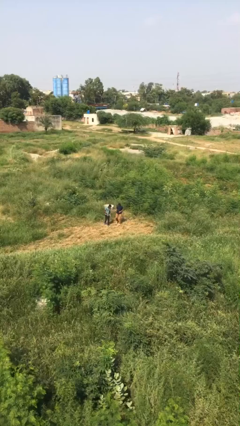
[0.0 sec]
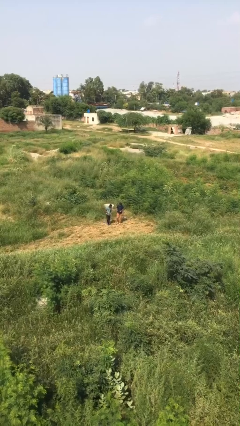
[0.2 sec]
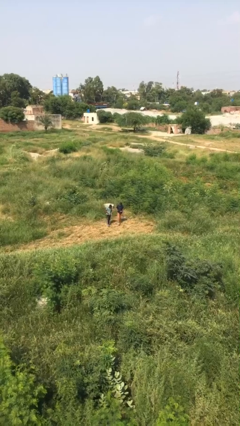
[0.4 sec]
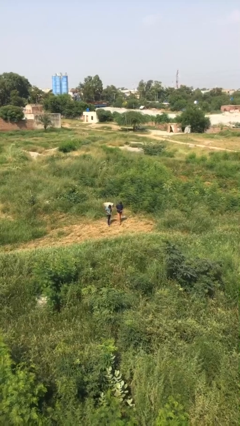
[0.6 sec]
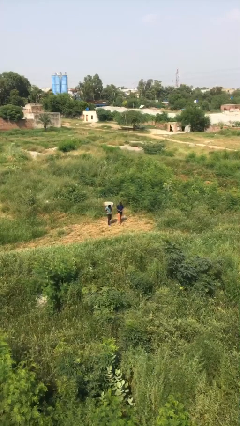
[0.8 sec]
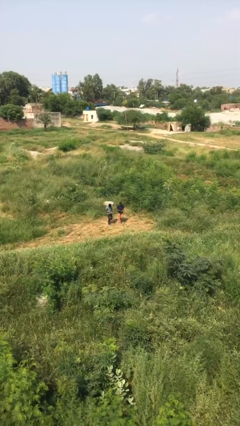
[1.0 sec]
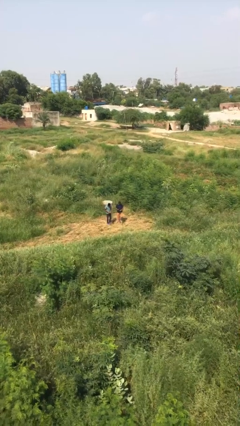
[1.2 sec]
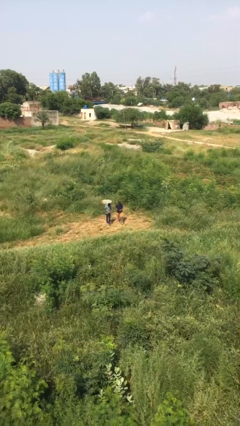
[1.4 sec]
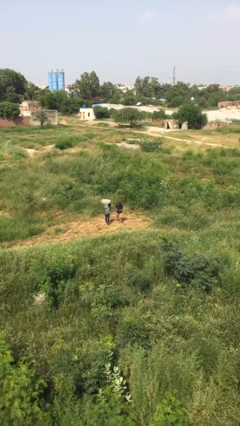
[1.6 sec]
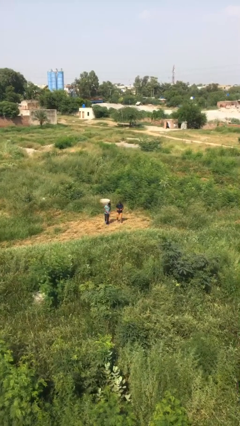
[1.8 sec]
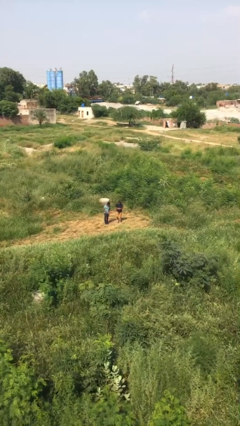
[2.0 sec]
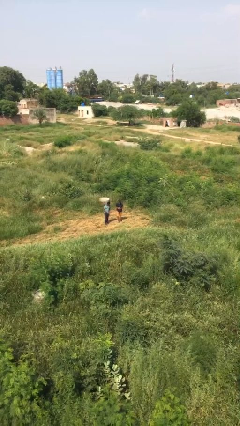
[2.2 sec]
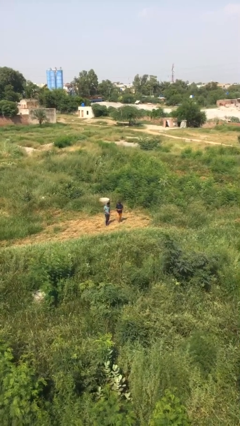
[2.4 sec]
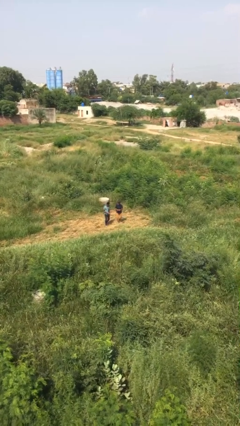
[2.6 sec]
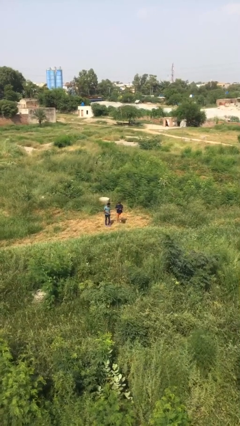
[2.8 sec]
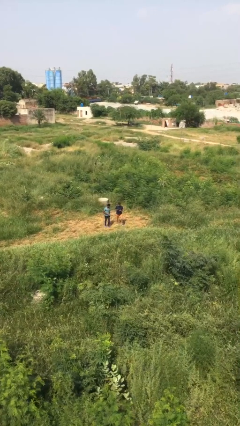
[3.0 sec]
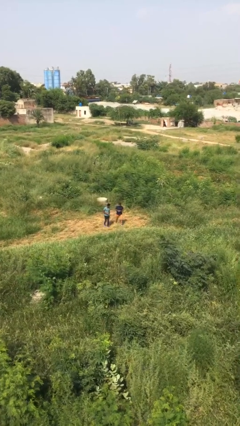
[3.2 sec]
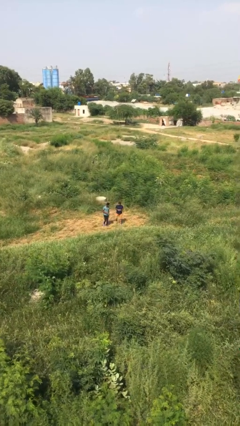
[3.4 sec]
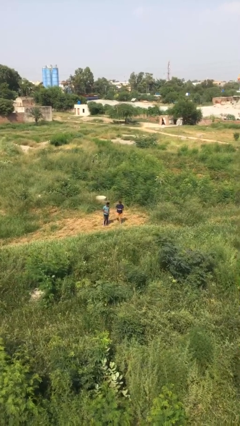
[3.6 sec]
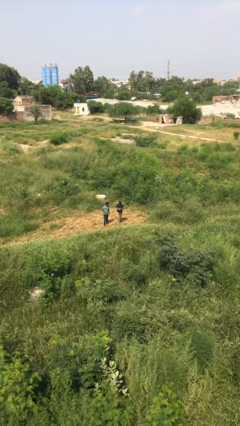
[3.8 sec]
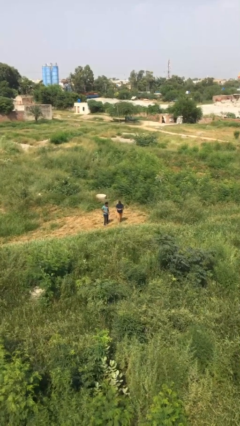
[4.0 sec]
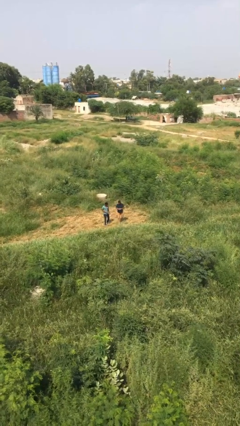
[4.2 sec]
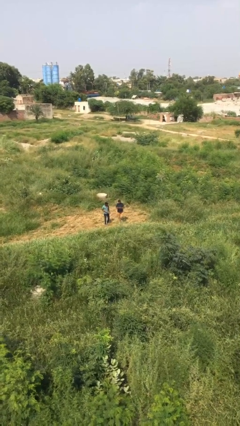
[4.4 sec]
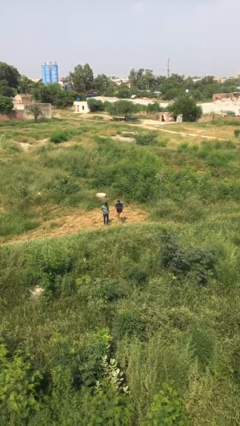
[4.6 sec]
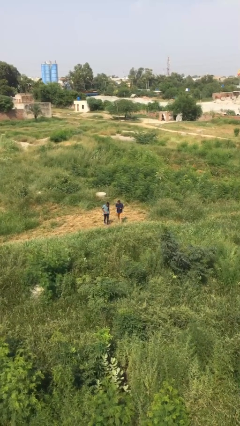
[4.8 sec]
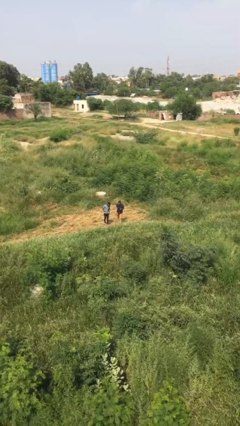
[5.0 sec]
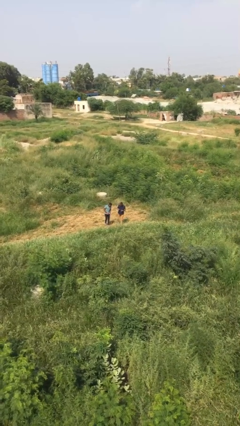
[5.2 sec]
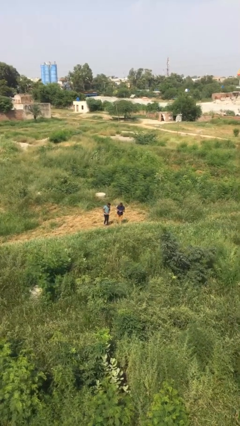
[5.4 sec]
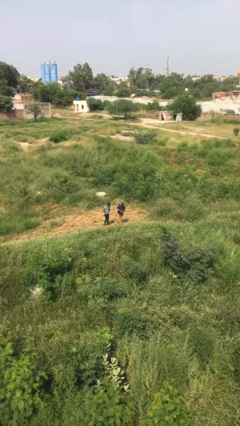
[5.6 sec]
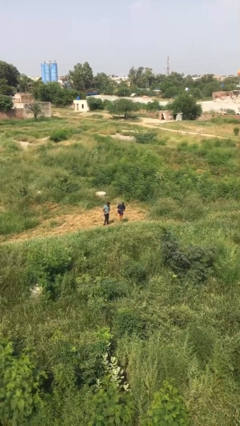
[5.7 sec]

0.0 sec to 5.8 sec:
person talks to person

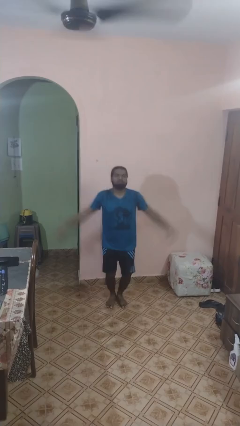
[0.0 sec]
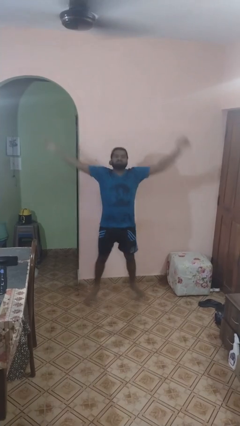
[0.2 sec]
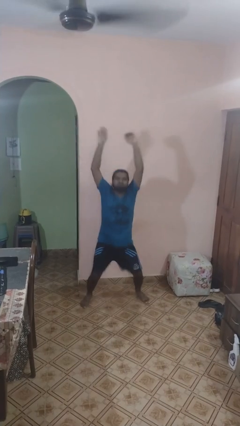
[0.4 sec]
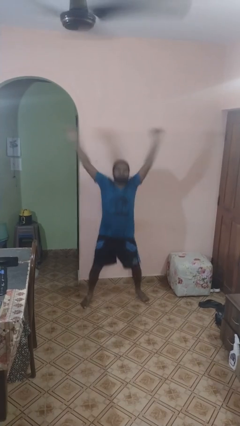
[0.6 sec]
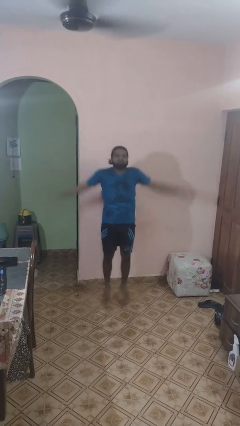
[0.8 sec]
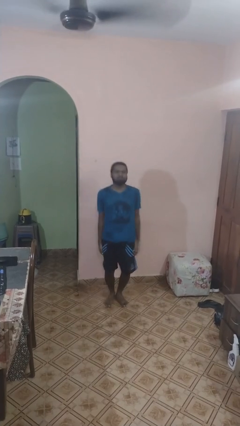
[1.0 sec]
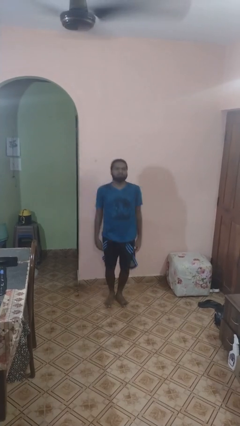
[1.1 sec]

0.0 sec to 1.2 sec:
person exercises with jumping jacks

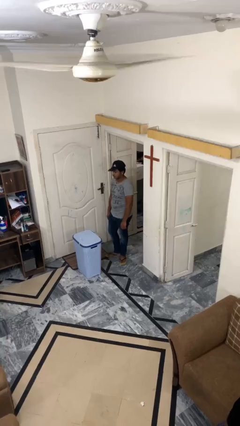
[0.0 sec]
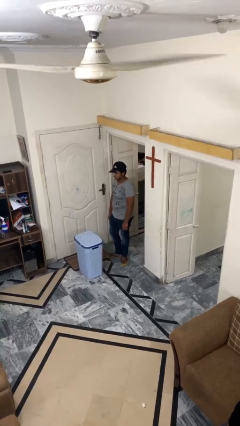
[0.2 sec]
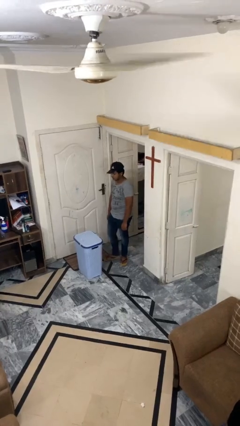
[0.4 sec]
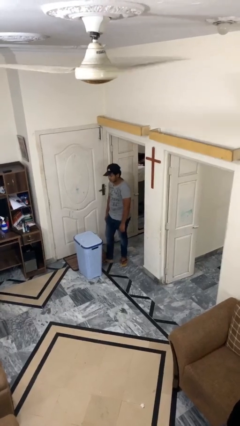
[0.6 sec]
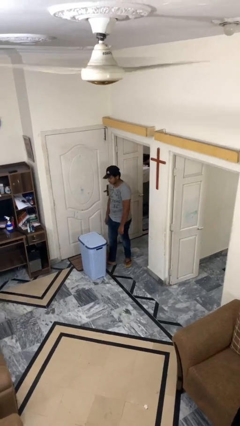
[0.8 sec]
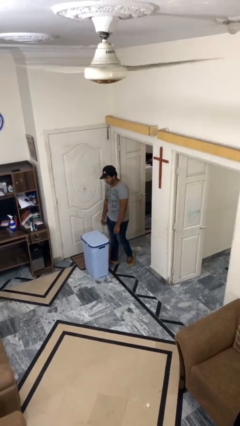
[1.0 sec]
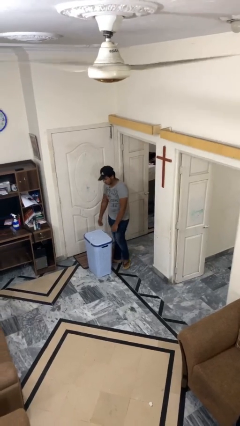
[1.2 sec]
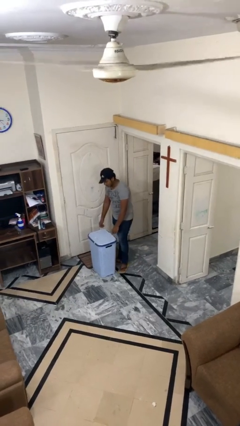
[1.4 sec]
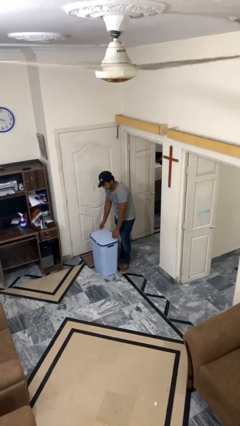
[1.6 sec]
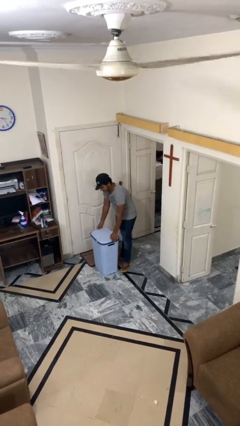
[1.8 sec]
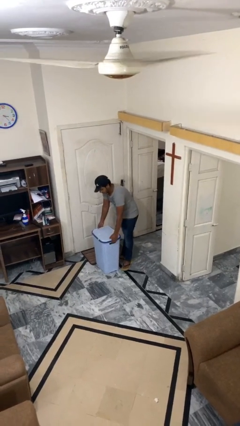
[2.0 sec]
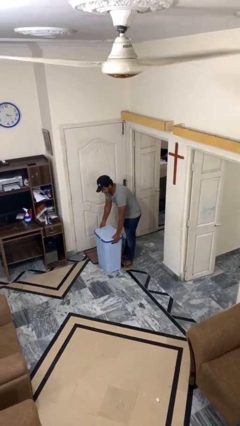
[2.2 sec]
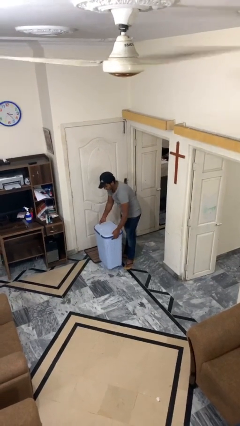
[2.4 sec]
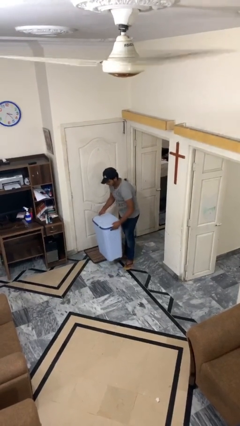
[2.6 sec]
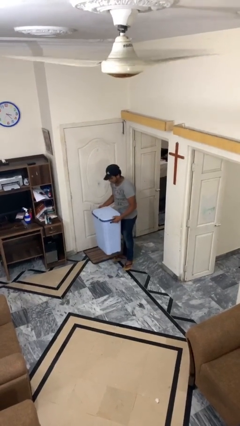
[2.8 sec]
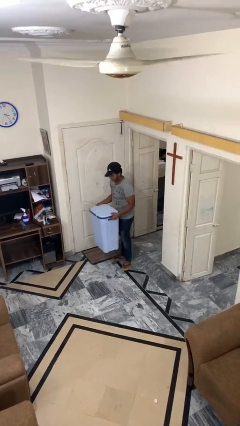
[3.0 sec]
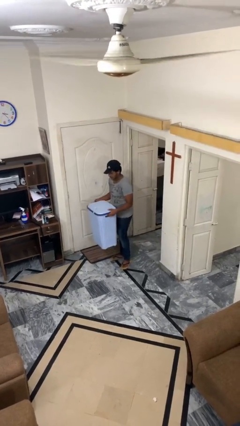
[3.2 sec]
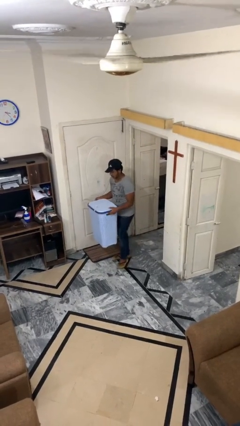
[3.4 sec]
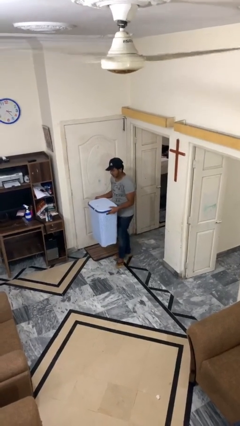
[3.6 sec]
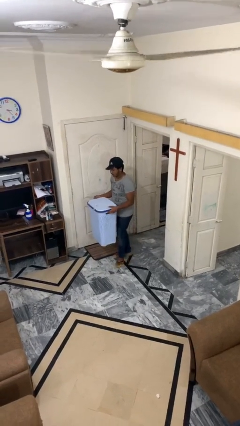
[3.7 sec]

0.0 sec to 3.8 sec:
person picks up object from floor

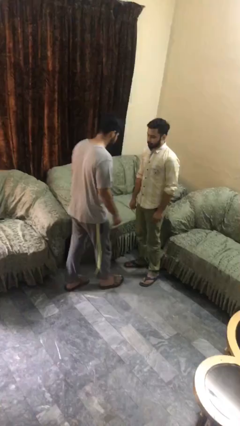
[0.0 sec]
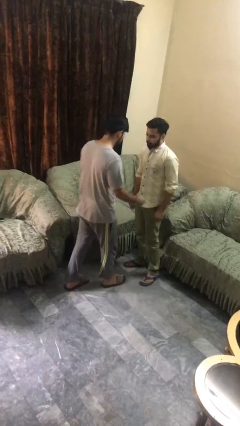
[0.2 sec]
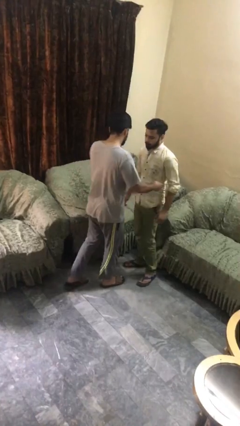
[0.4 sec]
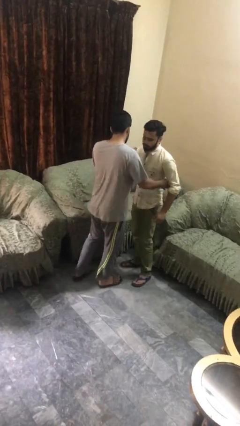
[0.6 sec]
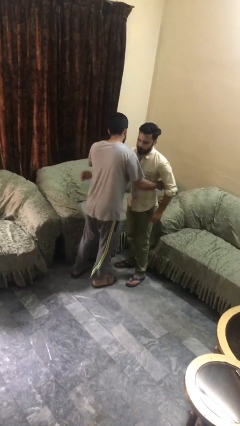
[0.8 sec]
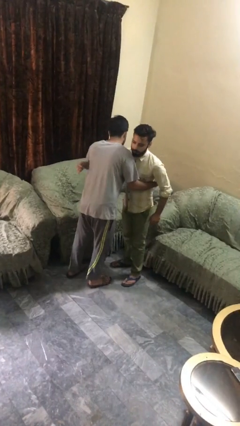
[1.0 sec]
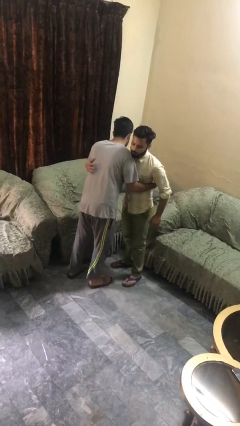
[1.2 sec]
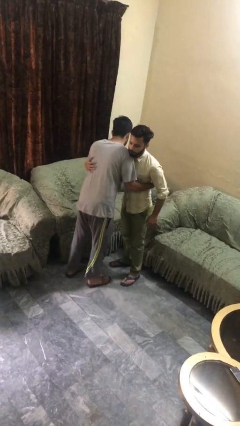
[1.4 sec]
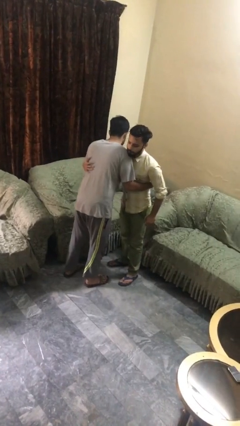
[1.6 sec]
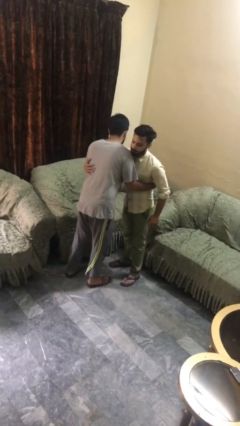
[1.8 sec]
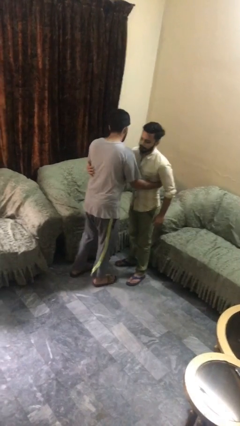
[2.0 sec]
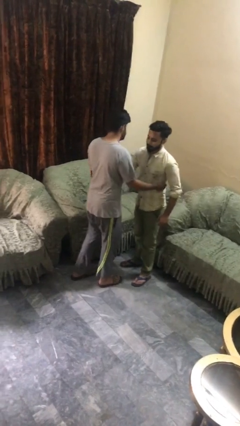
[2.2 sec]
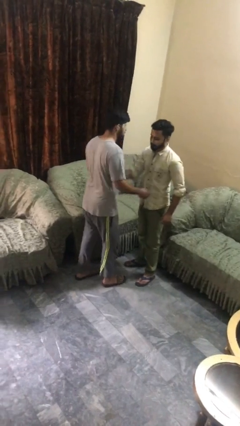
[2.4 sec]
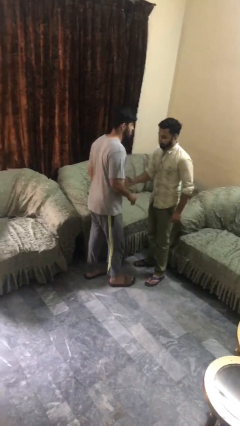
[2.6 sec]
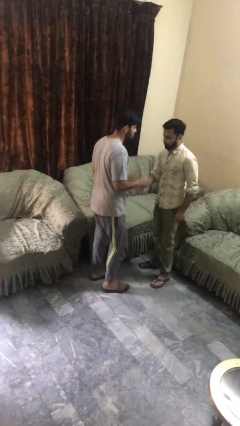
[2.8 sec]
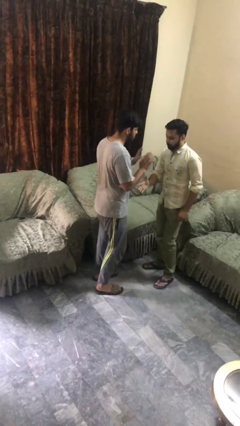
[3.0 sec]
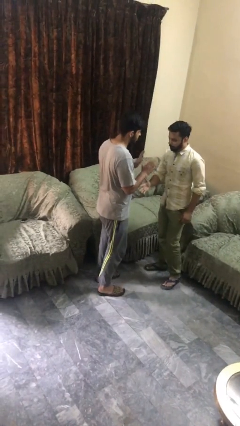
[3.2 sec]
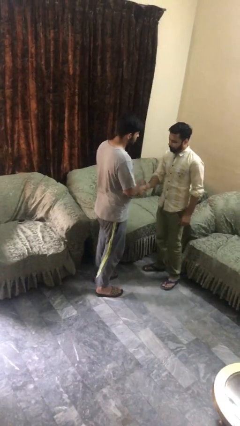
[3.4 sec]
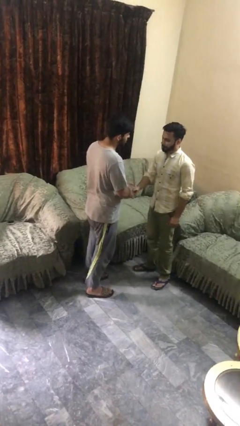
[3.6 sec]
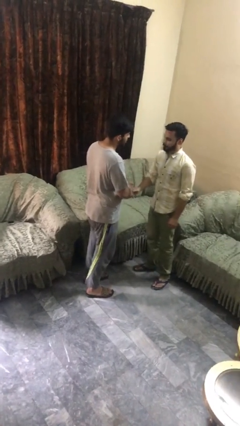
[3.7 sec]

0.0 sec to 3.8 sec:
person embraces person

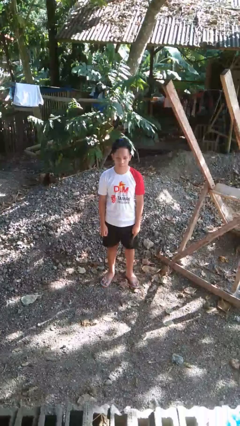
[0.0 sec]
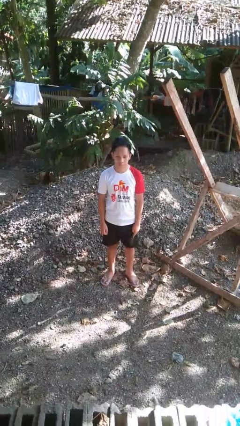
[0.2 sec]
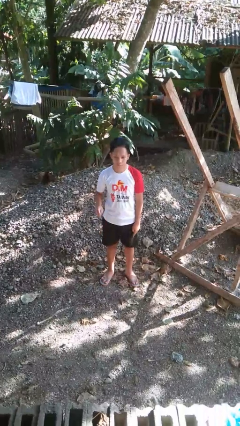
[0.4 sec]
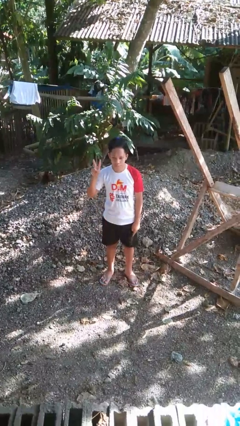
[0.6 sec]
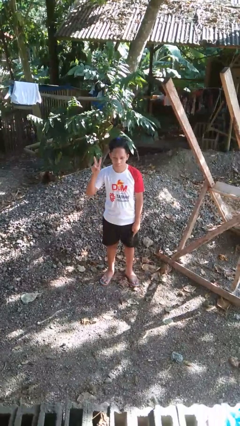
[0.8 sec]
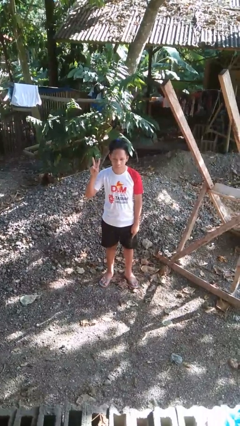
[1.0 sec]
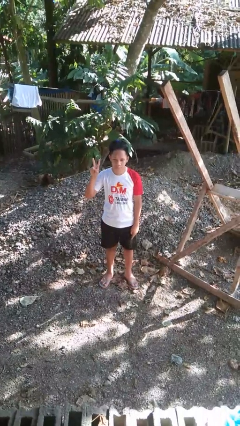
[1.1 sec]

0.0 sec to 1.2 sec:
person gestures peace

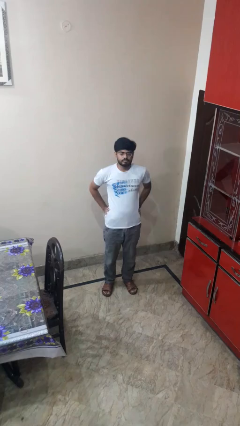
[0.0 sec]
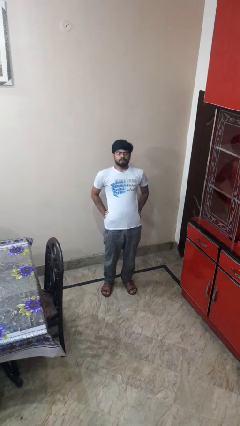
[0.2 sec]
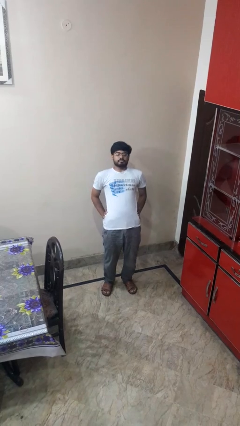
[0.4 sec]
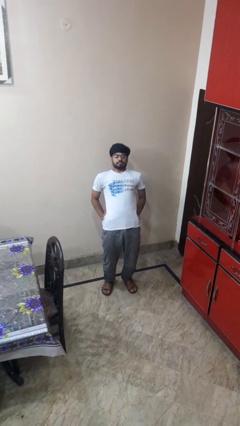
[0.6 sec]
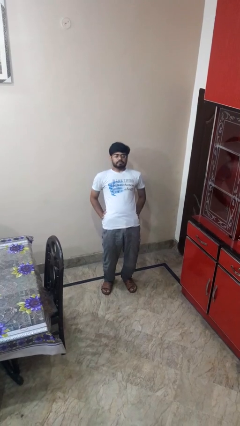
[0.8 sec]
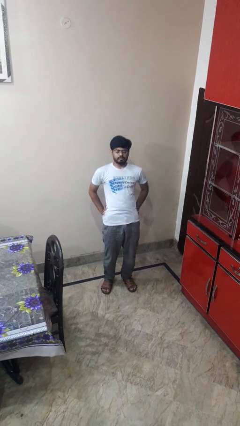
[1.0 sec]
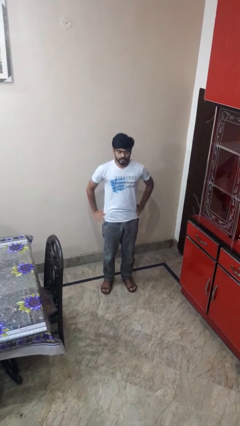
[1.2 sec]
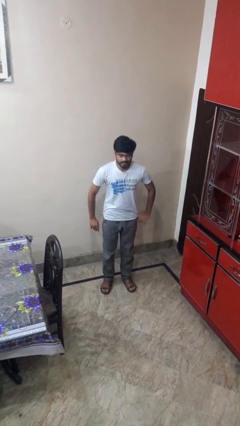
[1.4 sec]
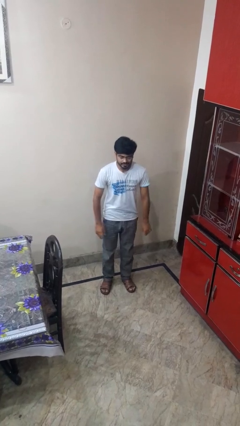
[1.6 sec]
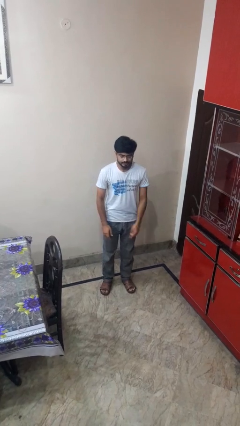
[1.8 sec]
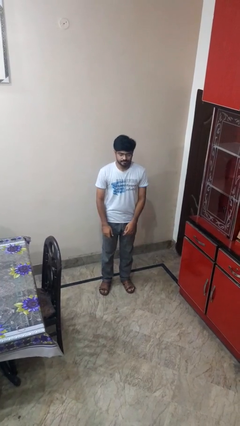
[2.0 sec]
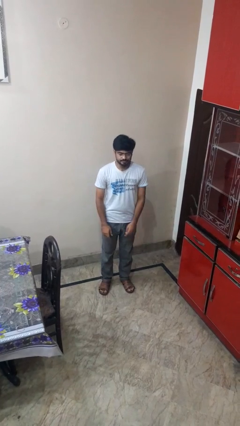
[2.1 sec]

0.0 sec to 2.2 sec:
person stretches back
